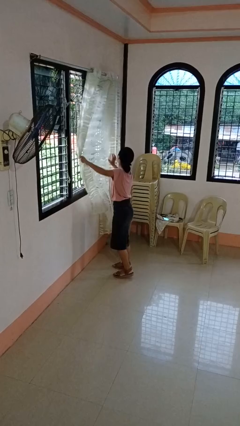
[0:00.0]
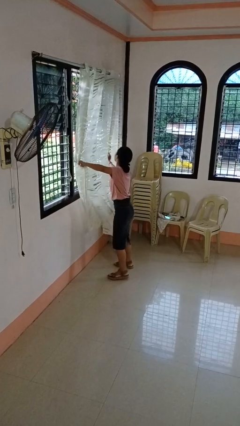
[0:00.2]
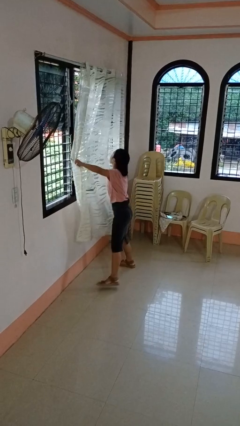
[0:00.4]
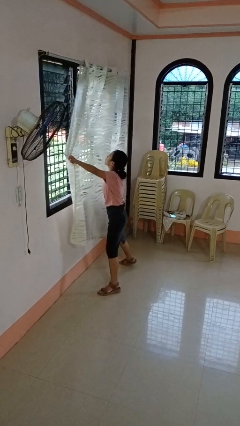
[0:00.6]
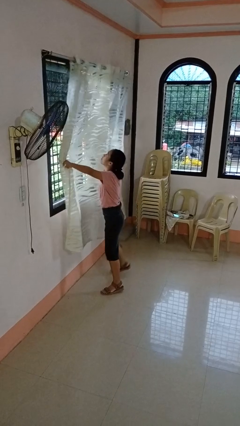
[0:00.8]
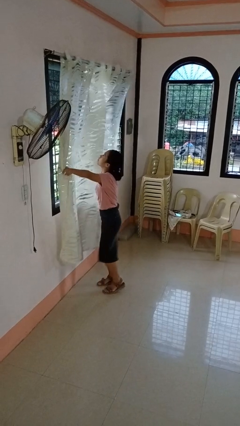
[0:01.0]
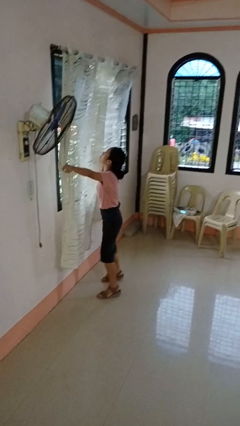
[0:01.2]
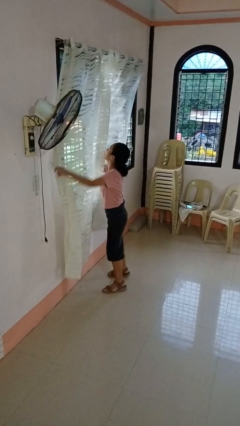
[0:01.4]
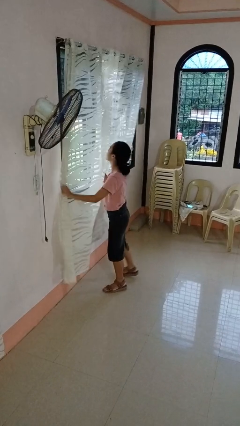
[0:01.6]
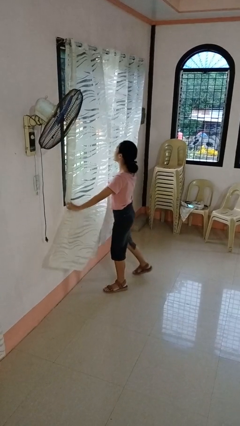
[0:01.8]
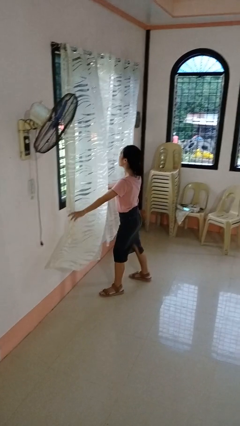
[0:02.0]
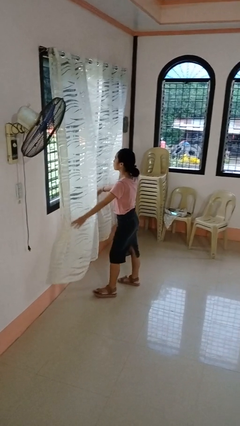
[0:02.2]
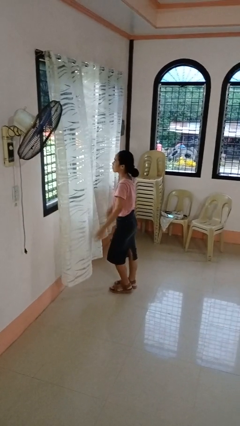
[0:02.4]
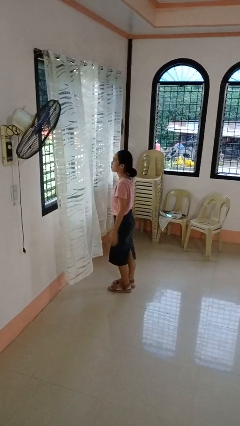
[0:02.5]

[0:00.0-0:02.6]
person closes curtains

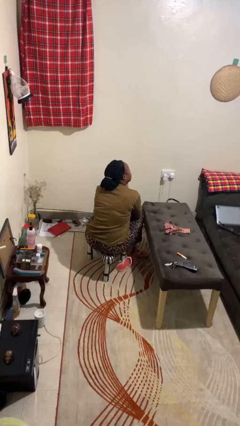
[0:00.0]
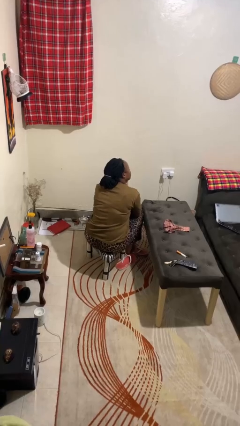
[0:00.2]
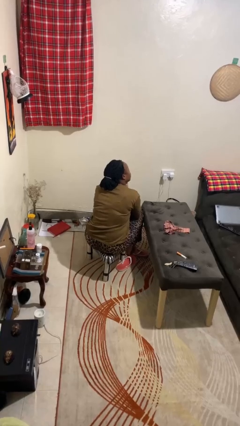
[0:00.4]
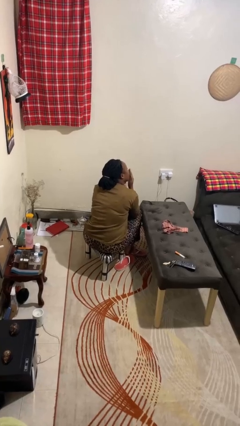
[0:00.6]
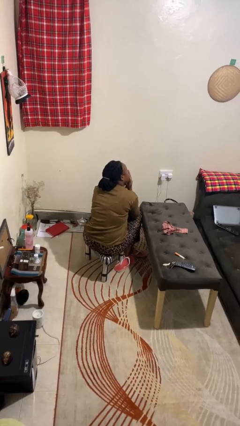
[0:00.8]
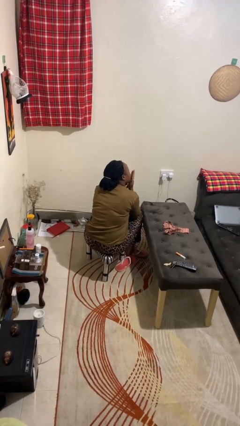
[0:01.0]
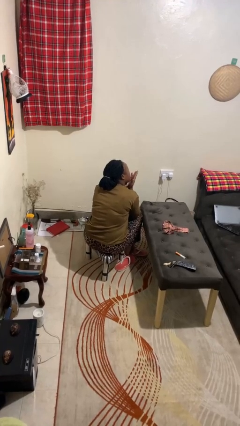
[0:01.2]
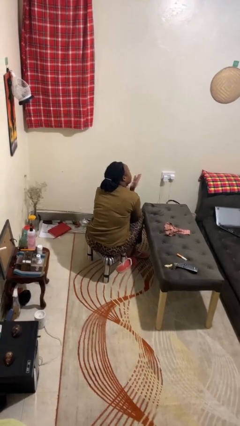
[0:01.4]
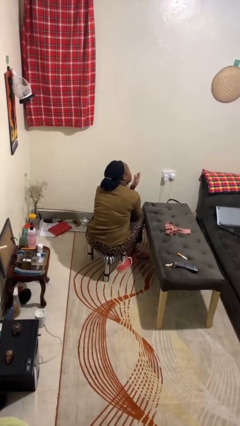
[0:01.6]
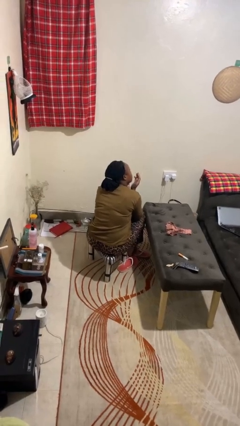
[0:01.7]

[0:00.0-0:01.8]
person gestures blow kiss

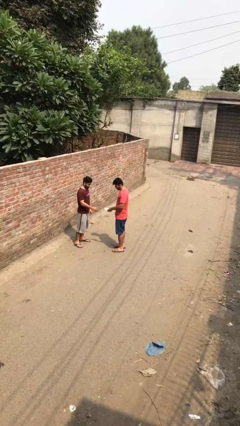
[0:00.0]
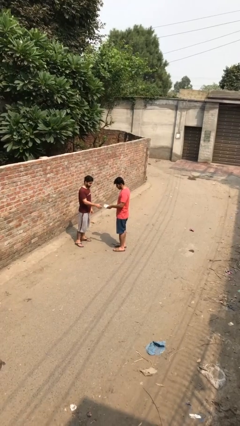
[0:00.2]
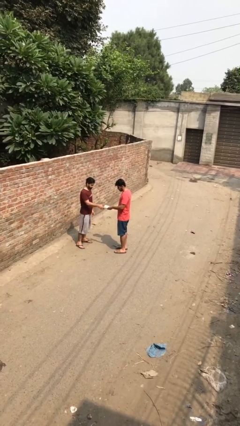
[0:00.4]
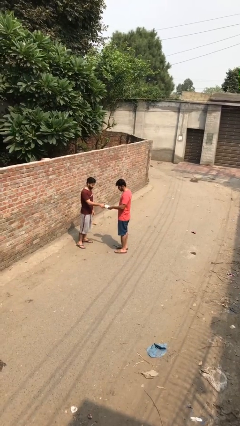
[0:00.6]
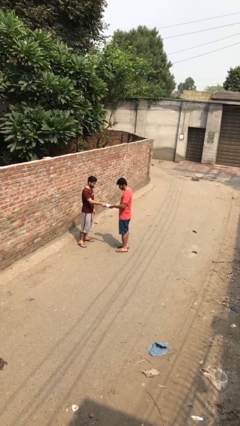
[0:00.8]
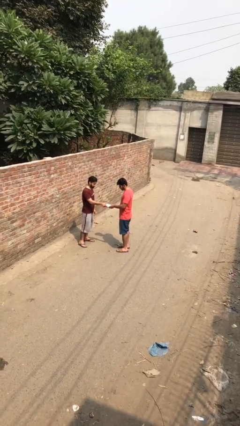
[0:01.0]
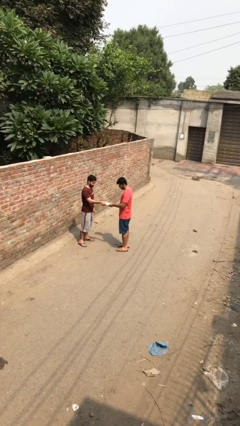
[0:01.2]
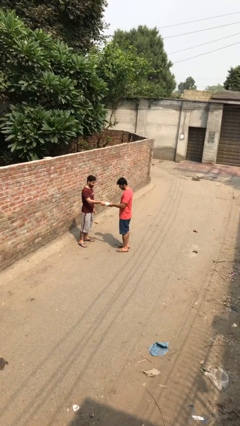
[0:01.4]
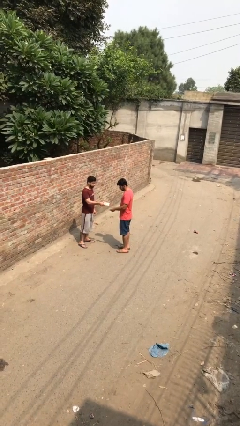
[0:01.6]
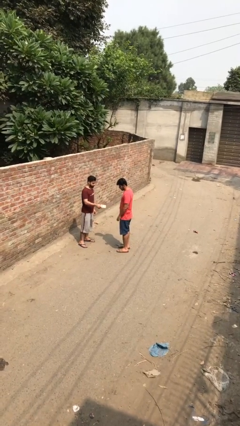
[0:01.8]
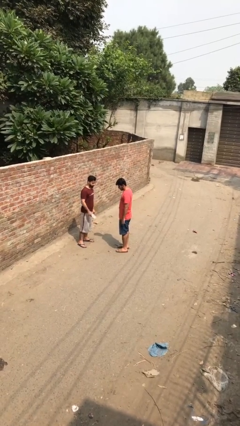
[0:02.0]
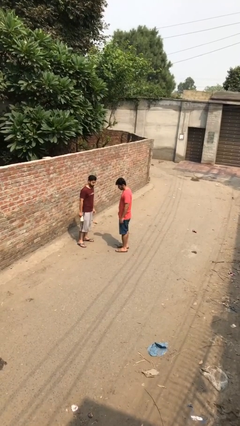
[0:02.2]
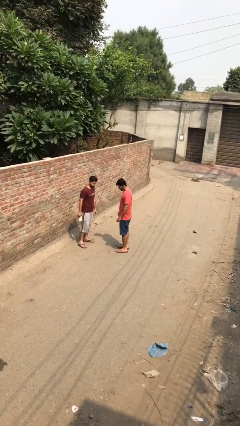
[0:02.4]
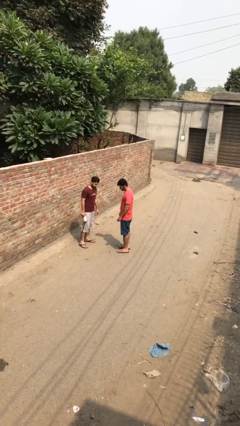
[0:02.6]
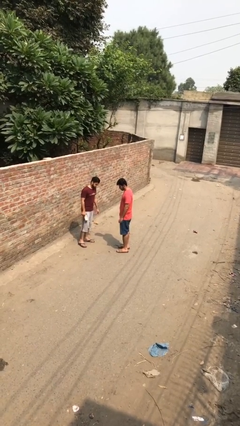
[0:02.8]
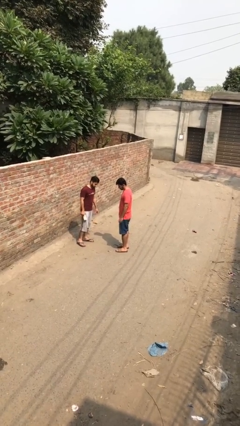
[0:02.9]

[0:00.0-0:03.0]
person transfers object to person

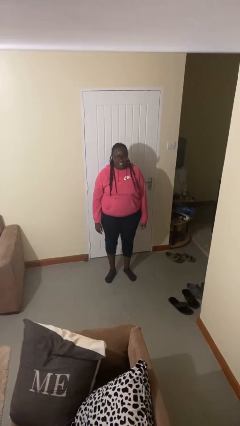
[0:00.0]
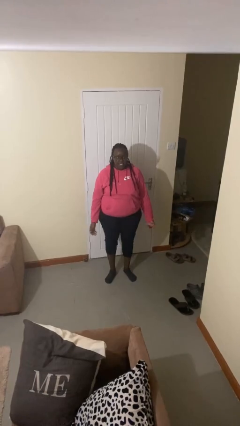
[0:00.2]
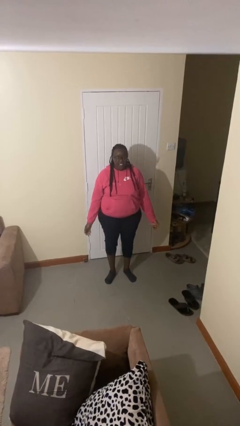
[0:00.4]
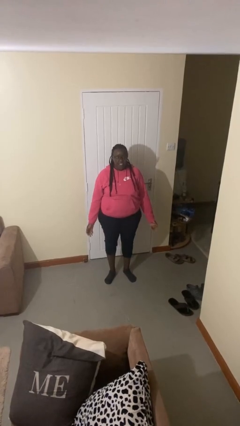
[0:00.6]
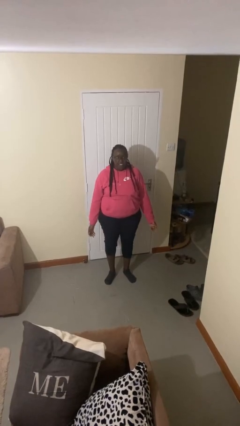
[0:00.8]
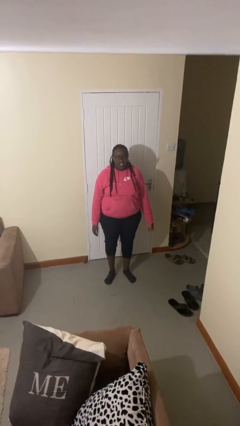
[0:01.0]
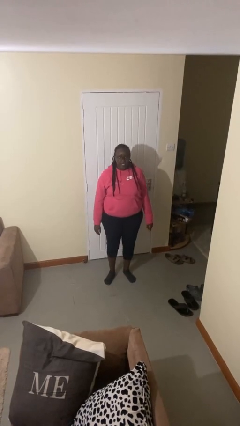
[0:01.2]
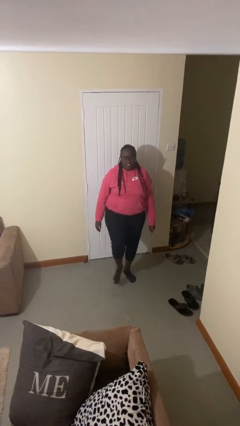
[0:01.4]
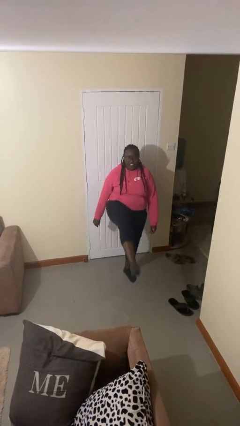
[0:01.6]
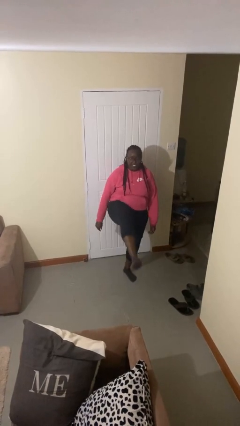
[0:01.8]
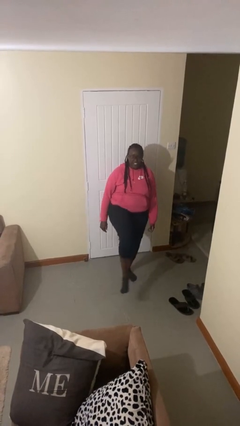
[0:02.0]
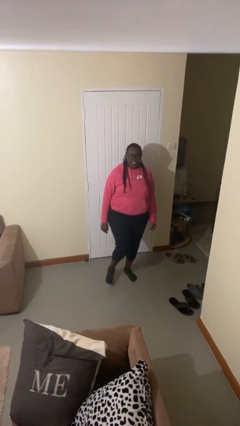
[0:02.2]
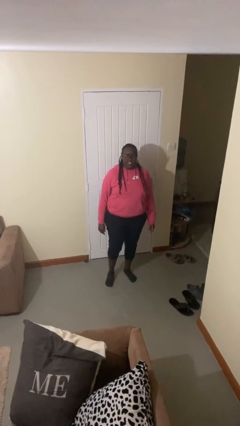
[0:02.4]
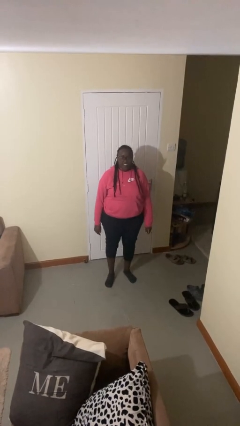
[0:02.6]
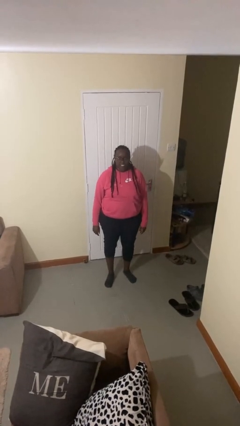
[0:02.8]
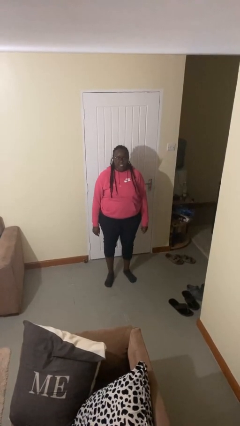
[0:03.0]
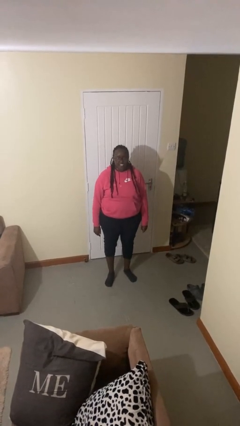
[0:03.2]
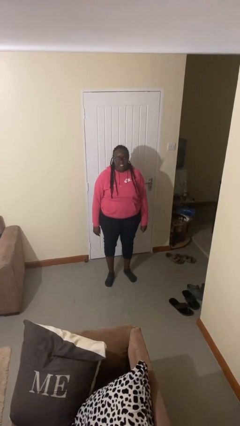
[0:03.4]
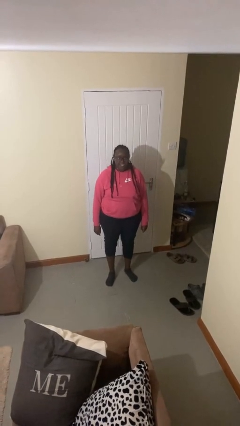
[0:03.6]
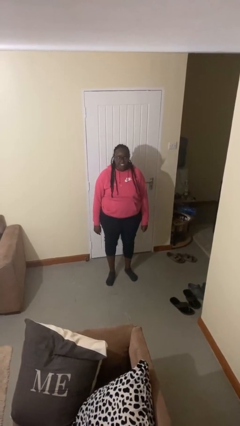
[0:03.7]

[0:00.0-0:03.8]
person karate kicks

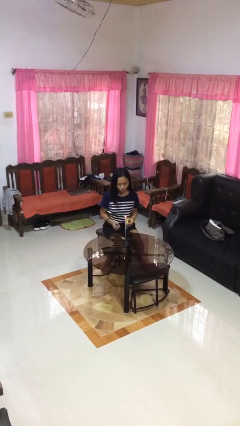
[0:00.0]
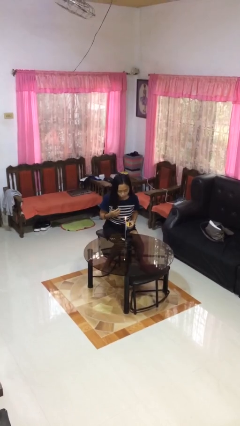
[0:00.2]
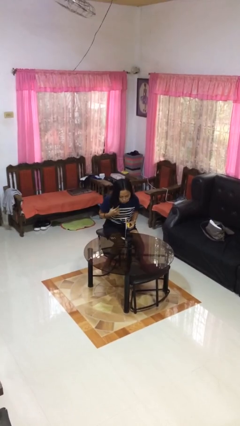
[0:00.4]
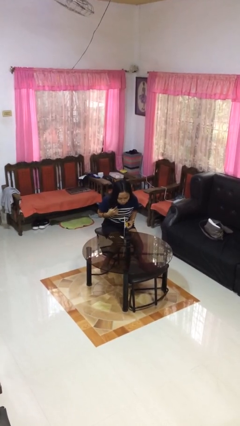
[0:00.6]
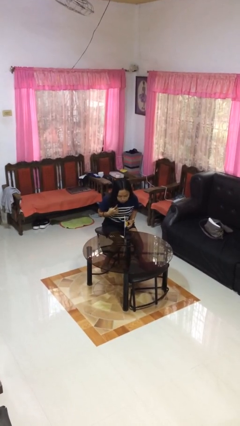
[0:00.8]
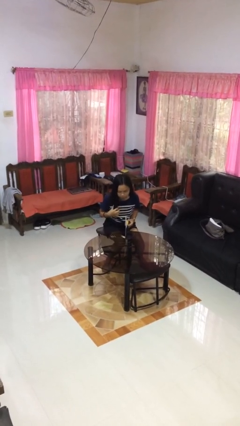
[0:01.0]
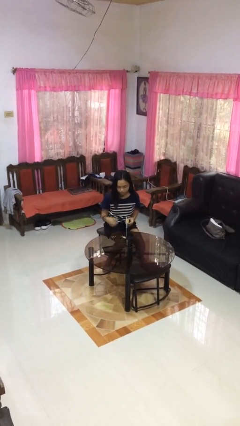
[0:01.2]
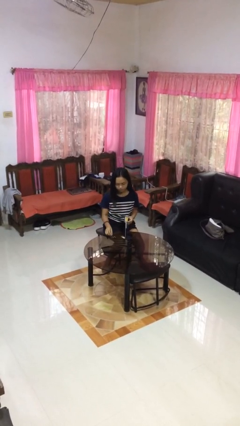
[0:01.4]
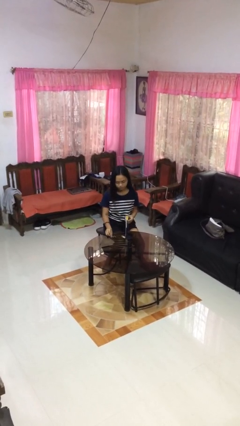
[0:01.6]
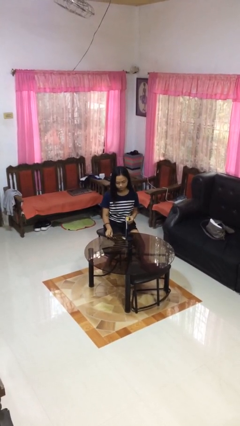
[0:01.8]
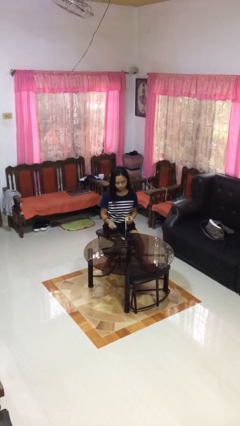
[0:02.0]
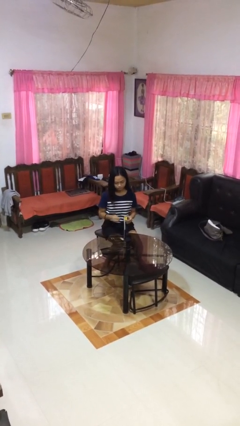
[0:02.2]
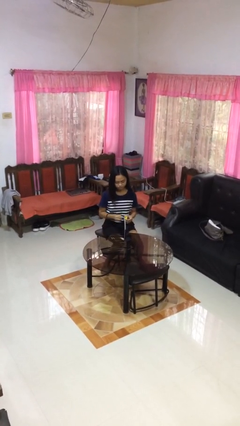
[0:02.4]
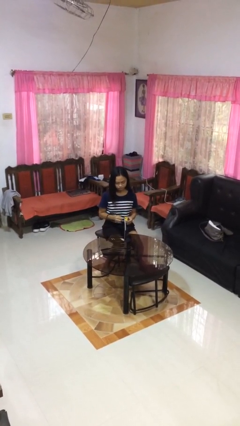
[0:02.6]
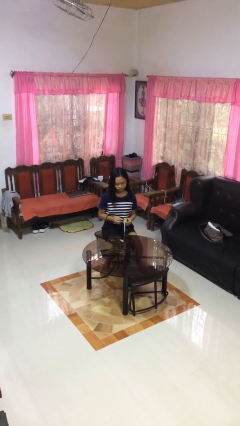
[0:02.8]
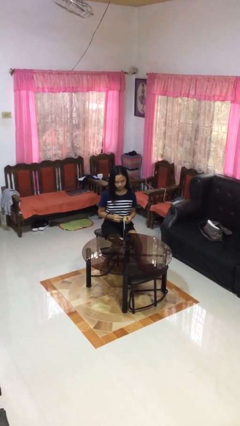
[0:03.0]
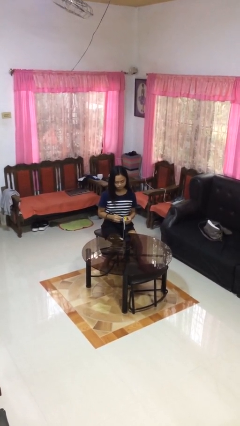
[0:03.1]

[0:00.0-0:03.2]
person extinguishes candle

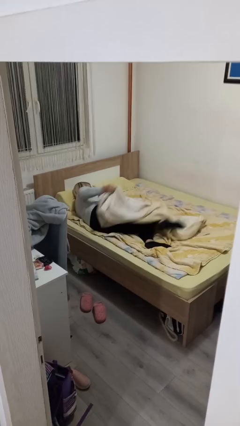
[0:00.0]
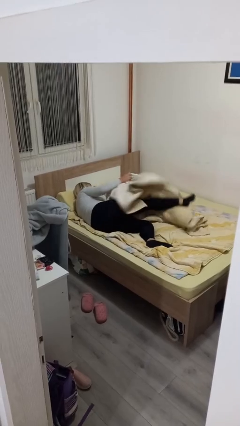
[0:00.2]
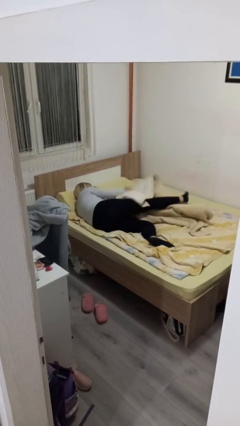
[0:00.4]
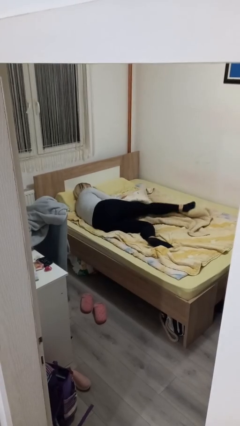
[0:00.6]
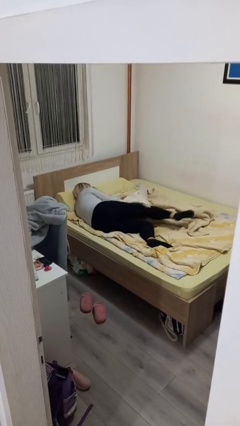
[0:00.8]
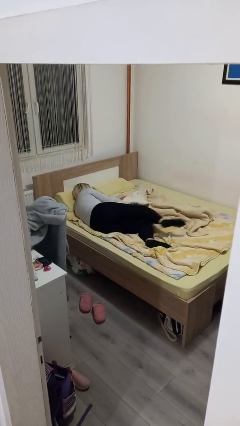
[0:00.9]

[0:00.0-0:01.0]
person uncovers with bedsheets

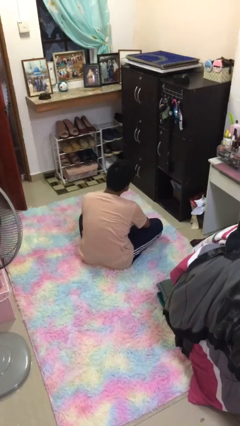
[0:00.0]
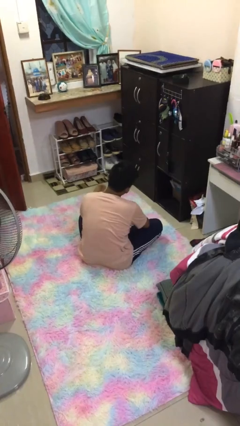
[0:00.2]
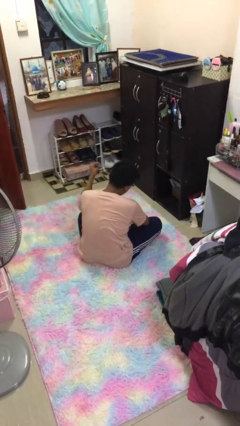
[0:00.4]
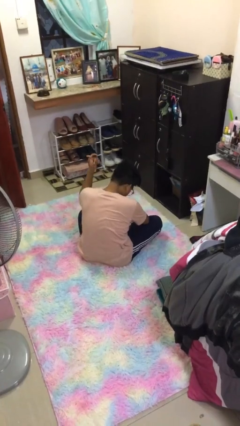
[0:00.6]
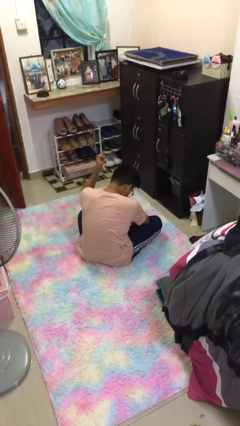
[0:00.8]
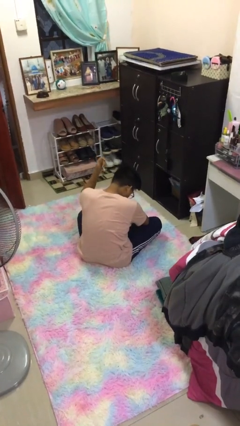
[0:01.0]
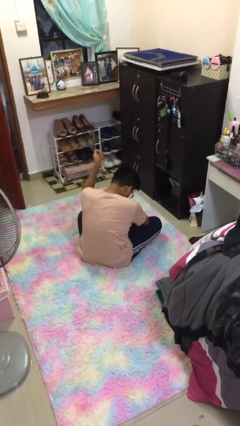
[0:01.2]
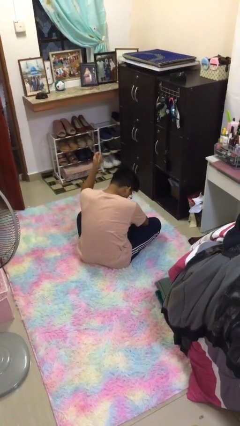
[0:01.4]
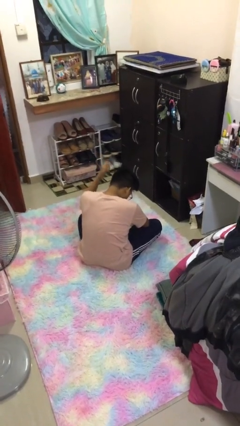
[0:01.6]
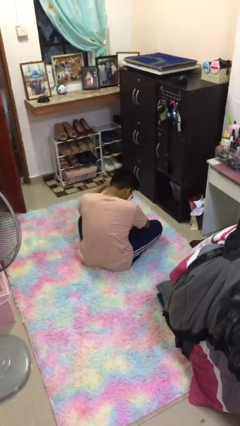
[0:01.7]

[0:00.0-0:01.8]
person snaps fingers
